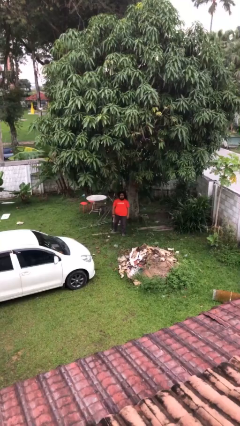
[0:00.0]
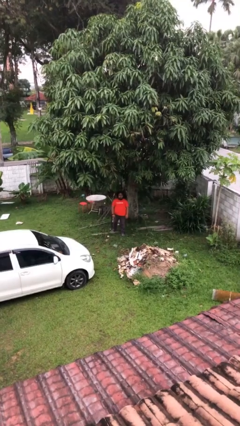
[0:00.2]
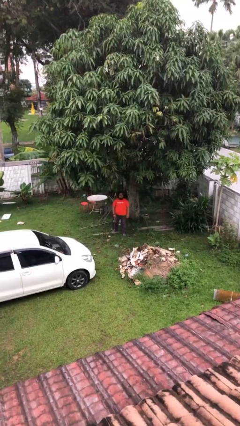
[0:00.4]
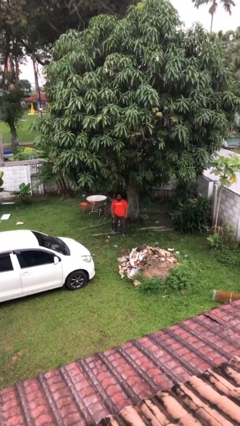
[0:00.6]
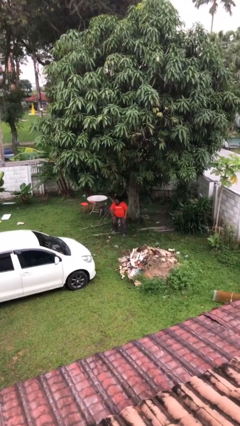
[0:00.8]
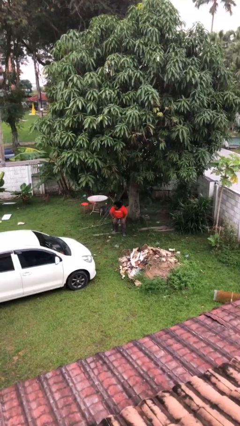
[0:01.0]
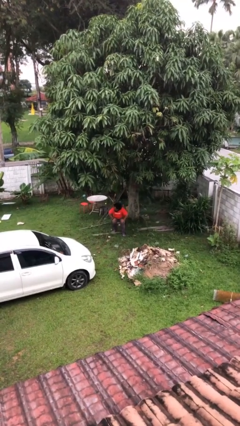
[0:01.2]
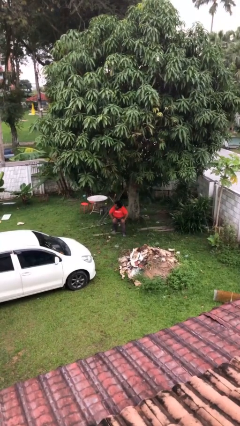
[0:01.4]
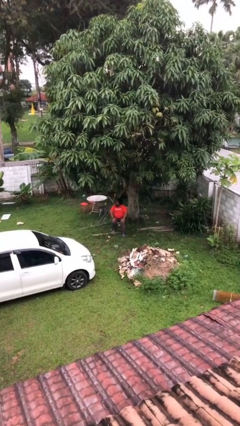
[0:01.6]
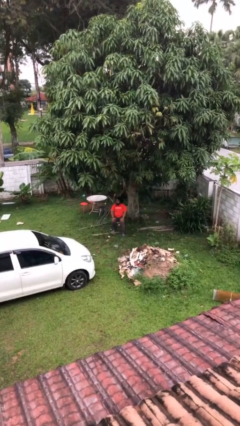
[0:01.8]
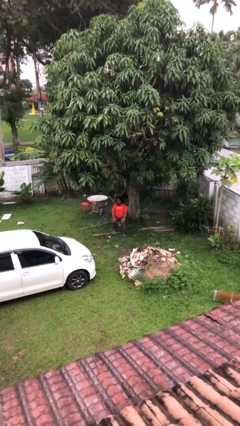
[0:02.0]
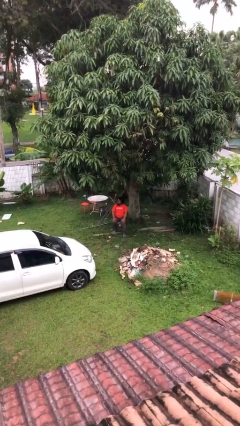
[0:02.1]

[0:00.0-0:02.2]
person sits down

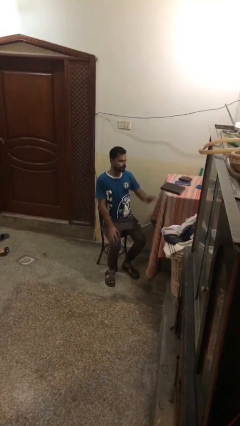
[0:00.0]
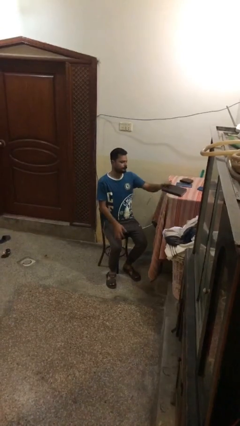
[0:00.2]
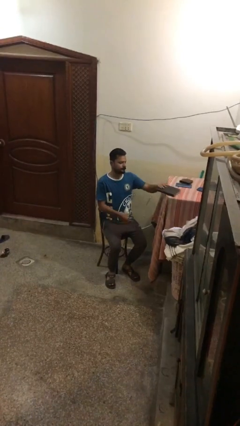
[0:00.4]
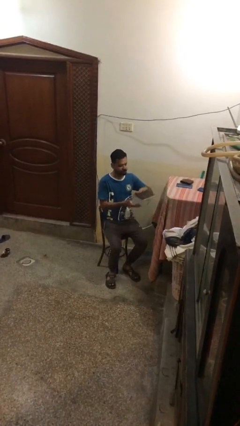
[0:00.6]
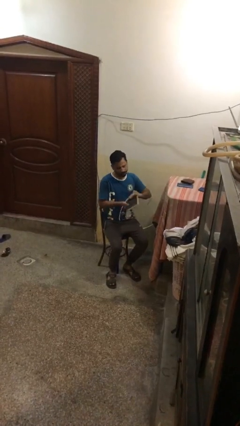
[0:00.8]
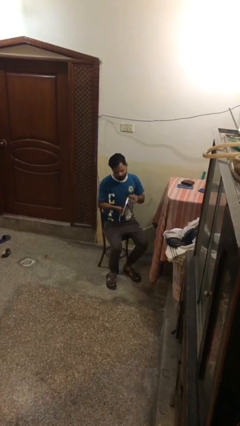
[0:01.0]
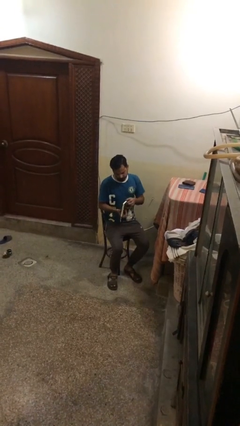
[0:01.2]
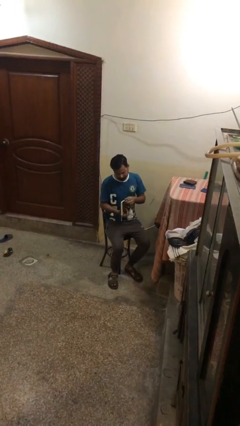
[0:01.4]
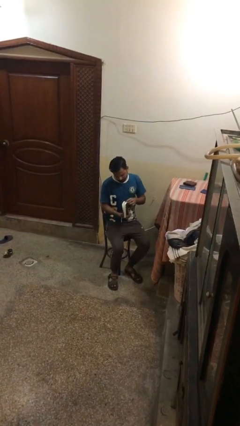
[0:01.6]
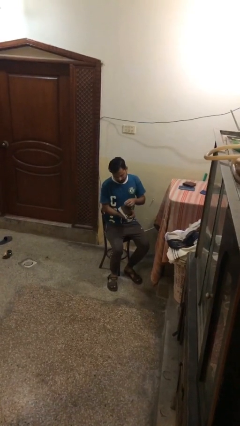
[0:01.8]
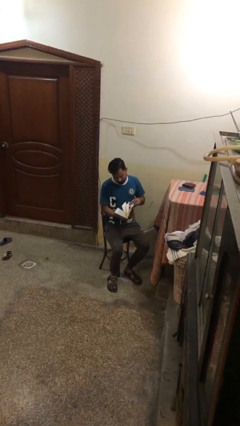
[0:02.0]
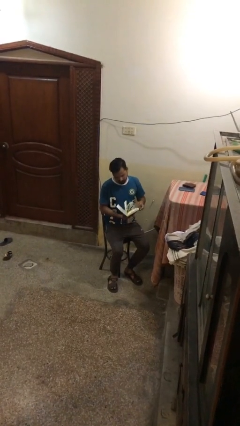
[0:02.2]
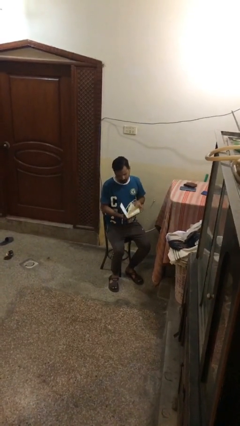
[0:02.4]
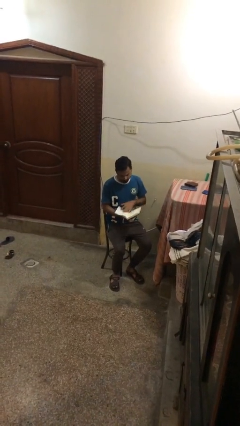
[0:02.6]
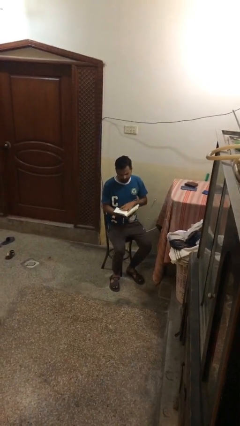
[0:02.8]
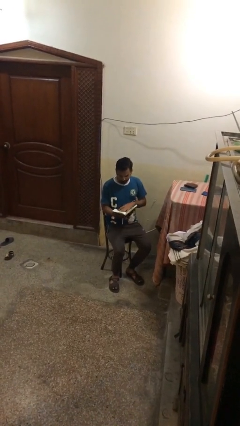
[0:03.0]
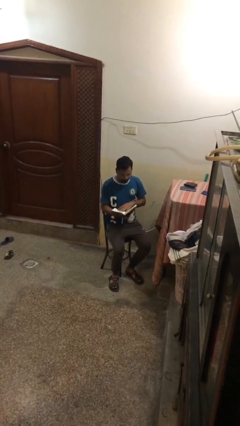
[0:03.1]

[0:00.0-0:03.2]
person reads document

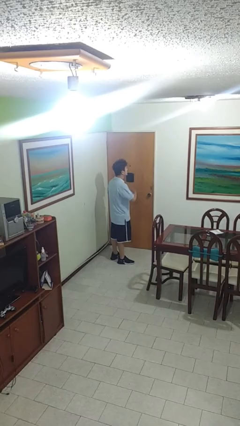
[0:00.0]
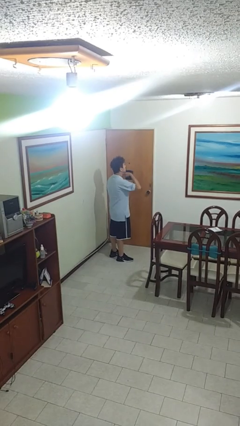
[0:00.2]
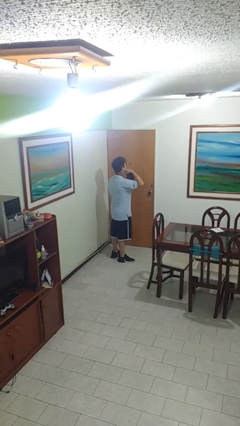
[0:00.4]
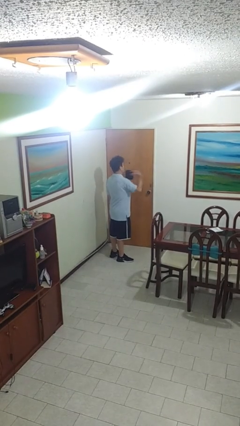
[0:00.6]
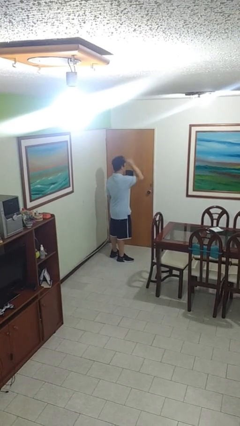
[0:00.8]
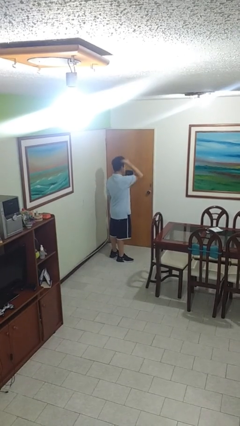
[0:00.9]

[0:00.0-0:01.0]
person gestures cut

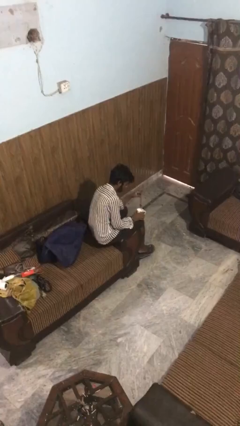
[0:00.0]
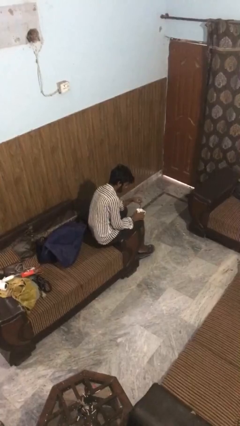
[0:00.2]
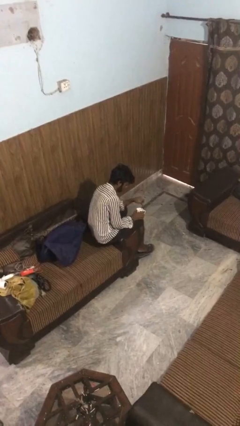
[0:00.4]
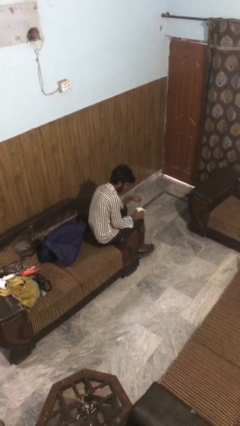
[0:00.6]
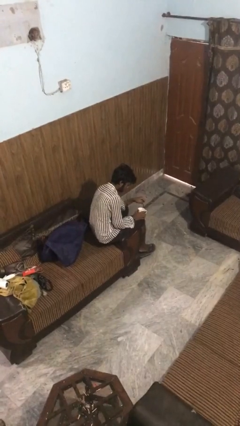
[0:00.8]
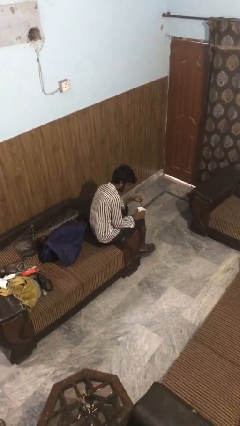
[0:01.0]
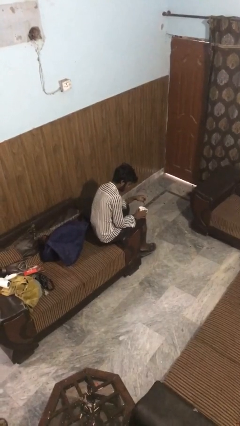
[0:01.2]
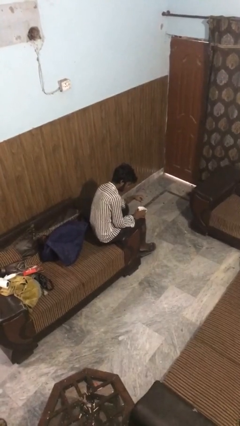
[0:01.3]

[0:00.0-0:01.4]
person stirs mug

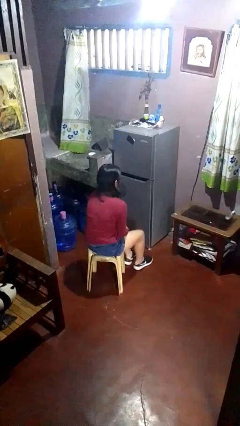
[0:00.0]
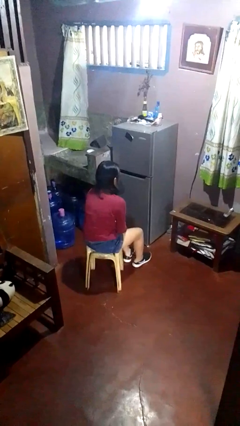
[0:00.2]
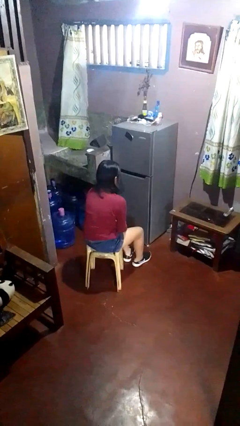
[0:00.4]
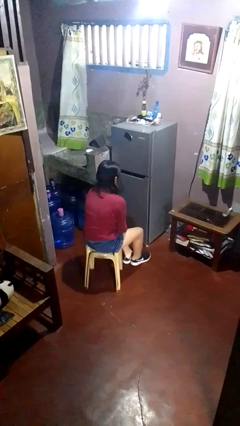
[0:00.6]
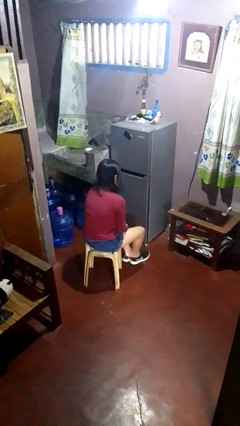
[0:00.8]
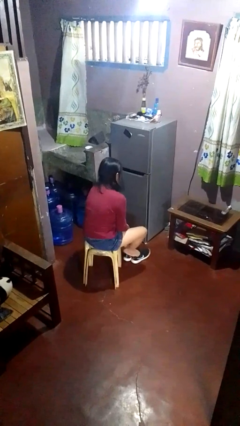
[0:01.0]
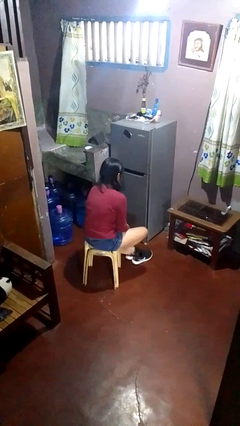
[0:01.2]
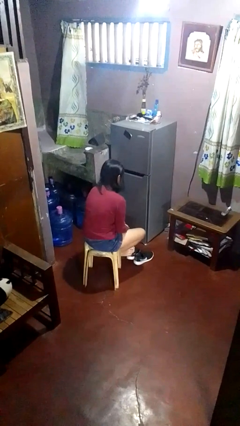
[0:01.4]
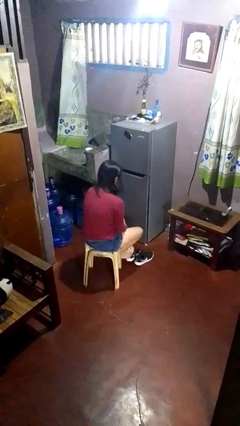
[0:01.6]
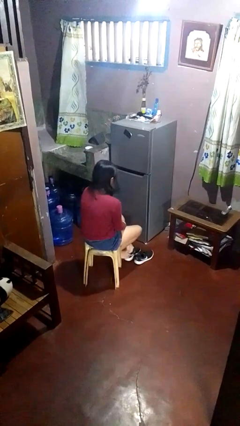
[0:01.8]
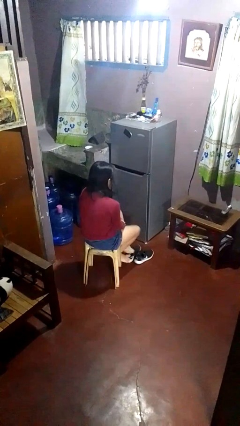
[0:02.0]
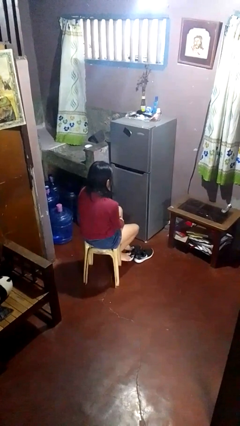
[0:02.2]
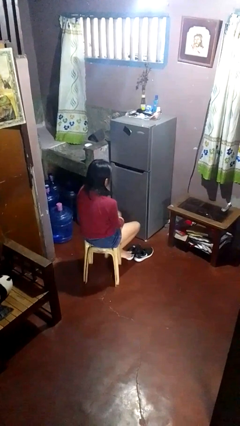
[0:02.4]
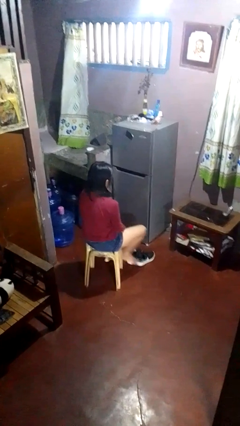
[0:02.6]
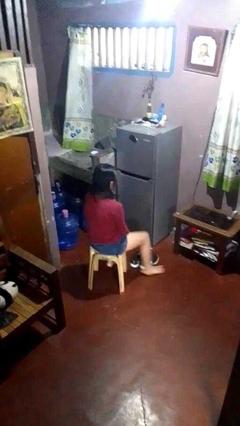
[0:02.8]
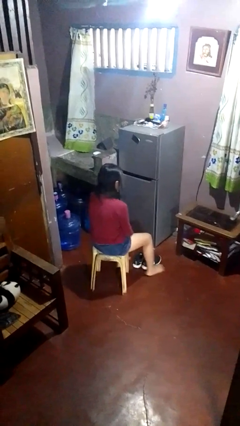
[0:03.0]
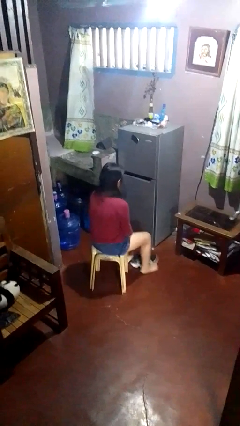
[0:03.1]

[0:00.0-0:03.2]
person takes off shoes

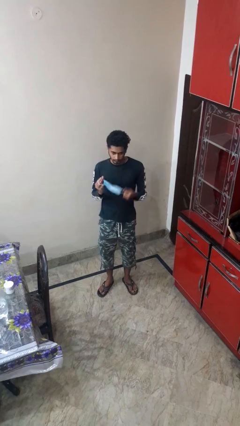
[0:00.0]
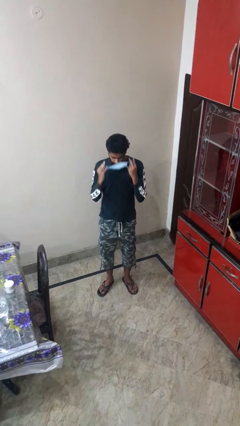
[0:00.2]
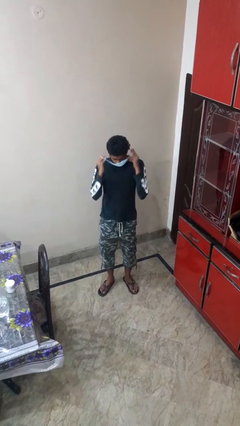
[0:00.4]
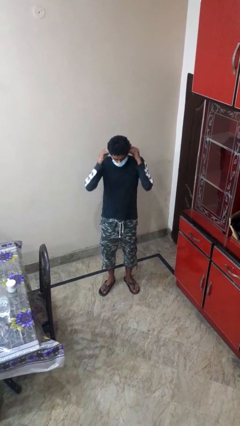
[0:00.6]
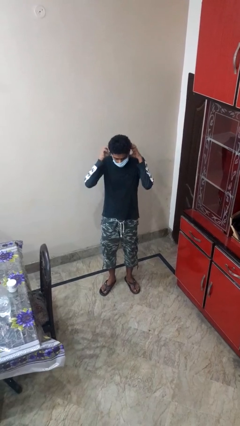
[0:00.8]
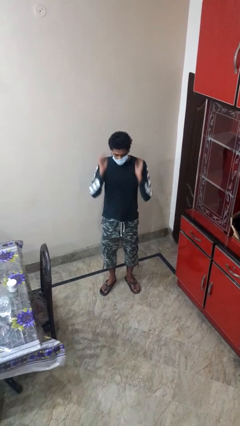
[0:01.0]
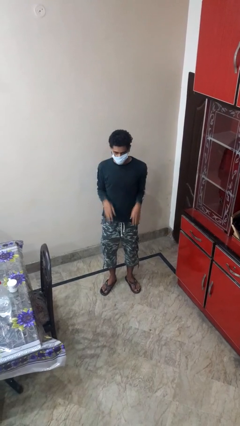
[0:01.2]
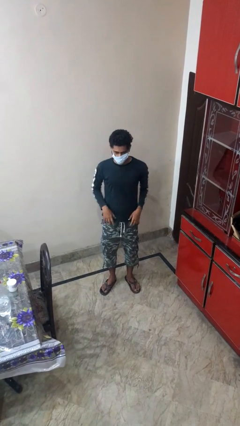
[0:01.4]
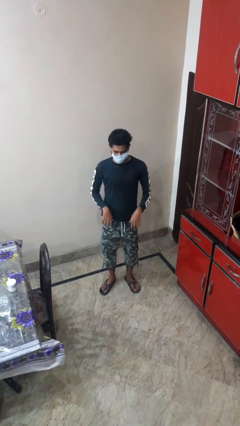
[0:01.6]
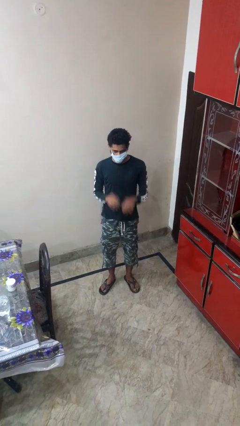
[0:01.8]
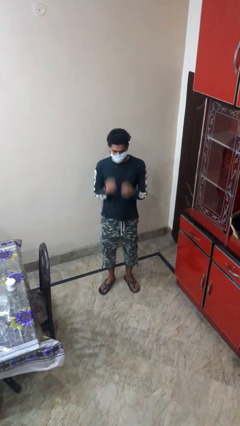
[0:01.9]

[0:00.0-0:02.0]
person puts on facemask

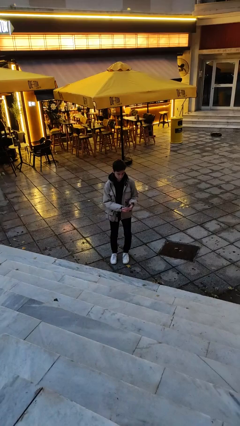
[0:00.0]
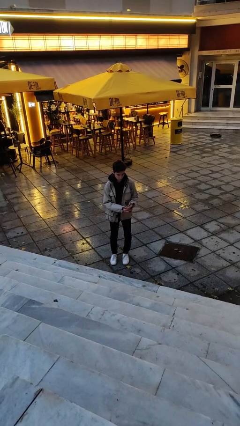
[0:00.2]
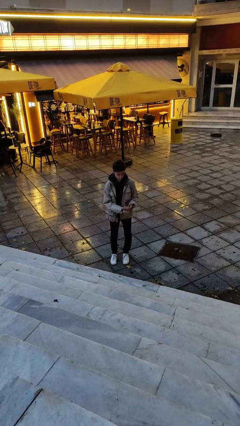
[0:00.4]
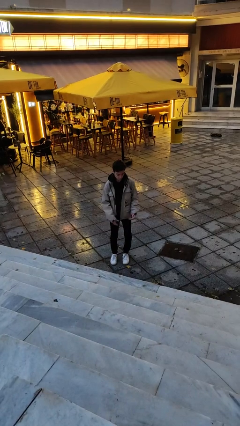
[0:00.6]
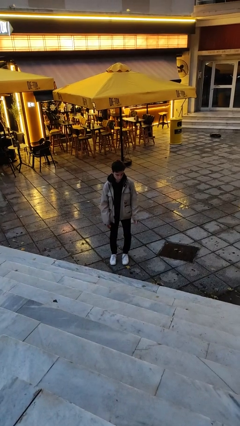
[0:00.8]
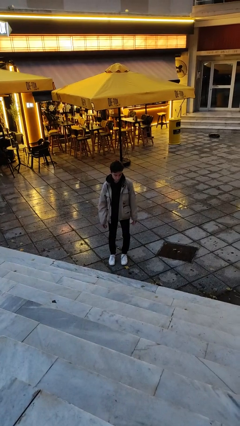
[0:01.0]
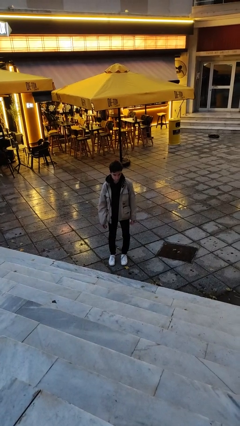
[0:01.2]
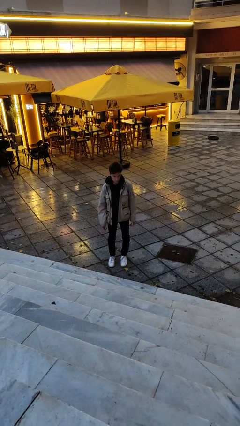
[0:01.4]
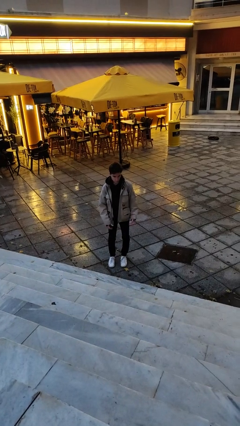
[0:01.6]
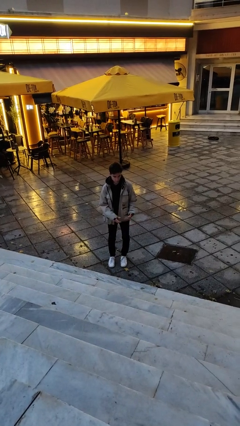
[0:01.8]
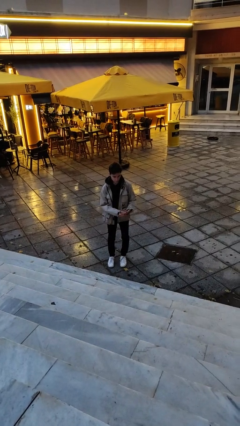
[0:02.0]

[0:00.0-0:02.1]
person puts on ring

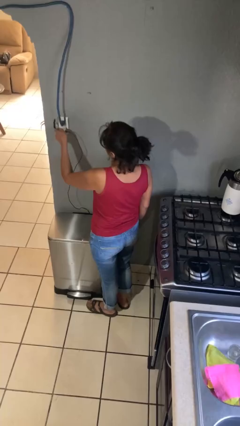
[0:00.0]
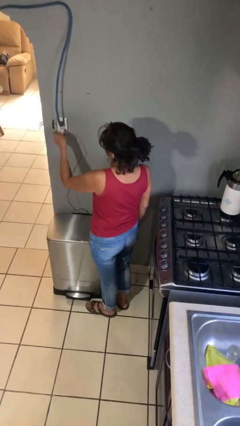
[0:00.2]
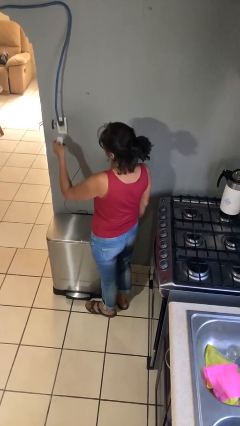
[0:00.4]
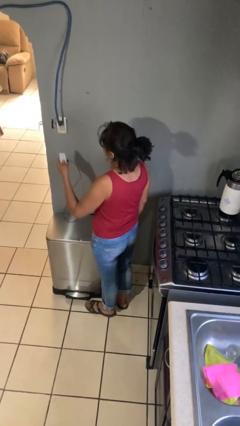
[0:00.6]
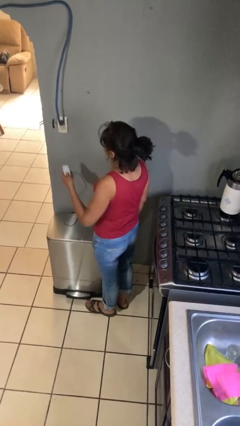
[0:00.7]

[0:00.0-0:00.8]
person unplugs from electrical socket

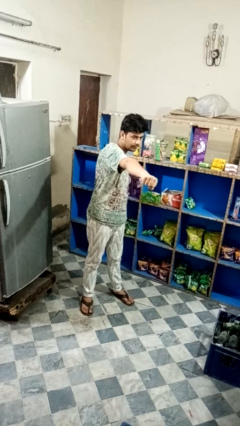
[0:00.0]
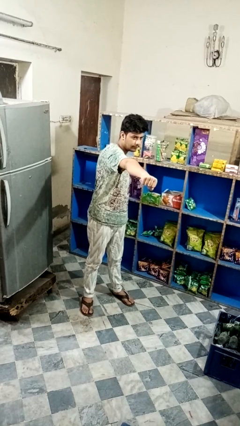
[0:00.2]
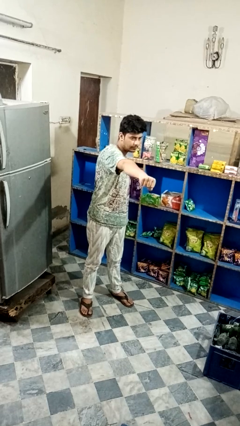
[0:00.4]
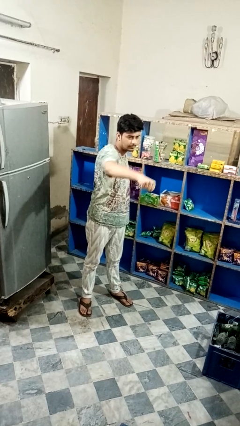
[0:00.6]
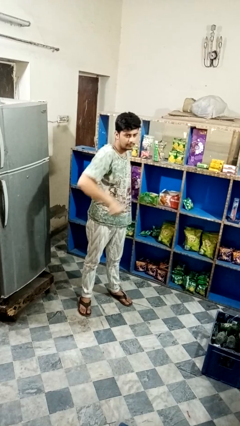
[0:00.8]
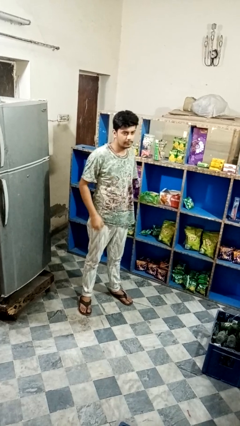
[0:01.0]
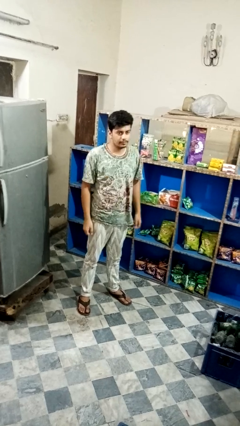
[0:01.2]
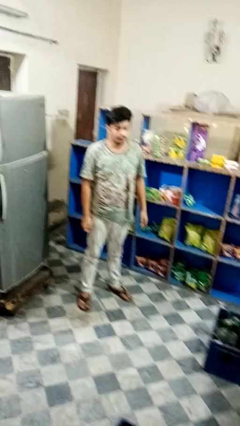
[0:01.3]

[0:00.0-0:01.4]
person punches
